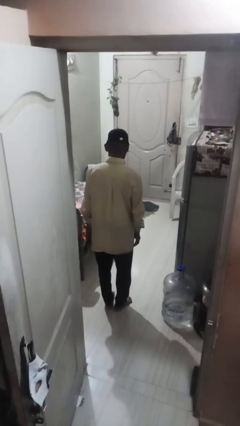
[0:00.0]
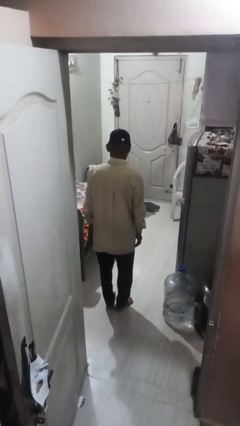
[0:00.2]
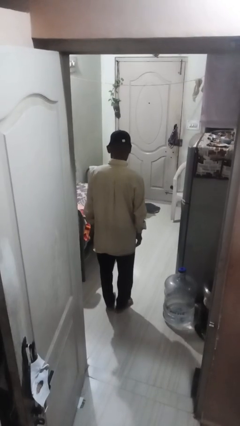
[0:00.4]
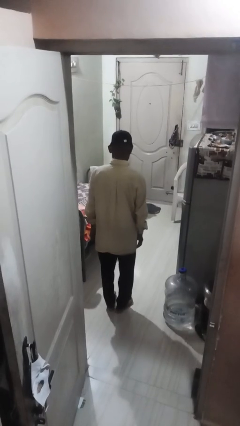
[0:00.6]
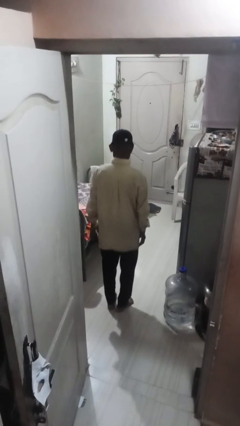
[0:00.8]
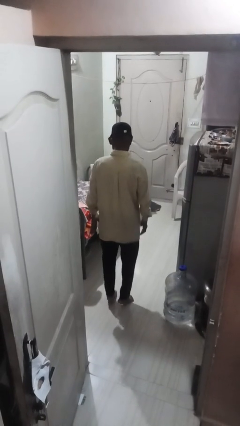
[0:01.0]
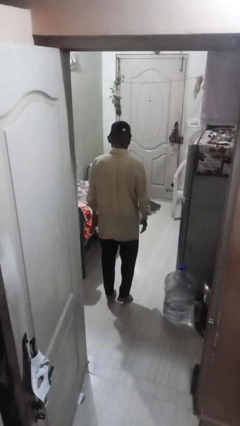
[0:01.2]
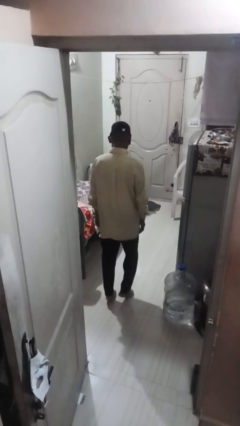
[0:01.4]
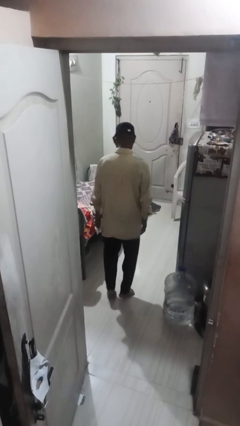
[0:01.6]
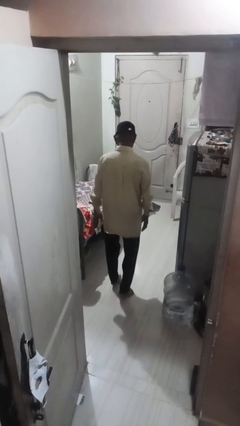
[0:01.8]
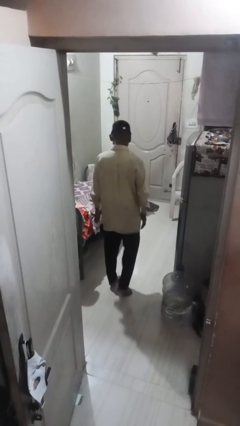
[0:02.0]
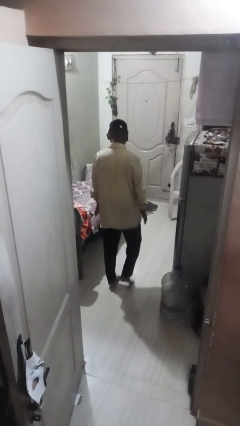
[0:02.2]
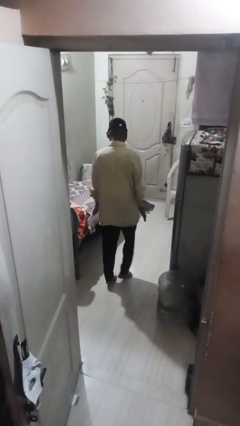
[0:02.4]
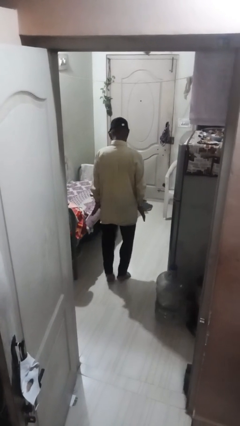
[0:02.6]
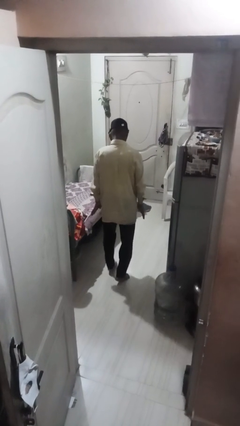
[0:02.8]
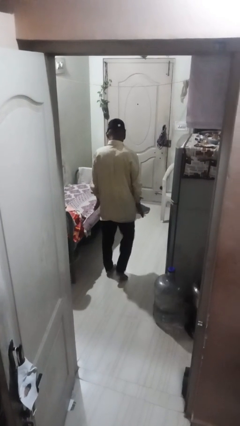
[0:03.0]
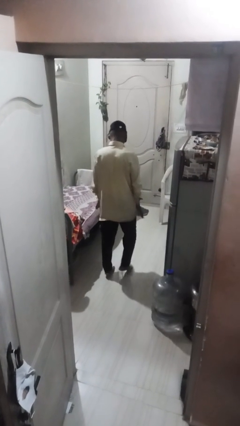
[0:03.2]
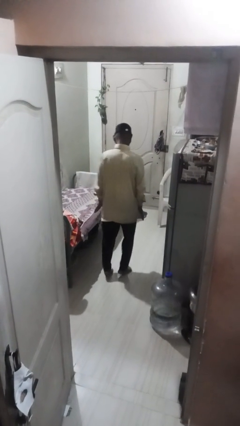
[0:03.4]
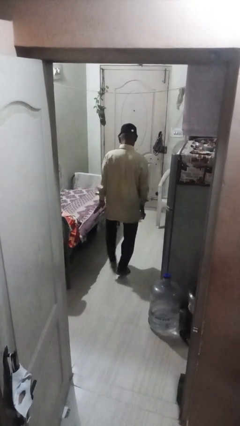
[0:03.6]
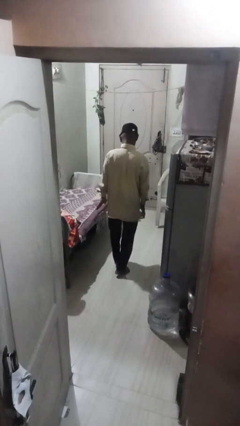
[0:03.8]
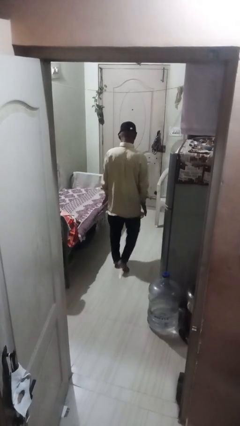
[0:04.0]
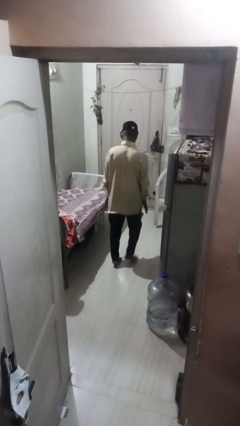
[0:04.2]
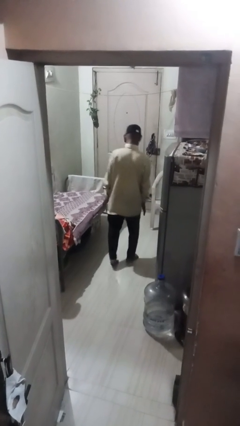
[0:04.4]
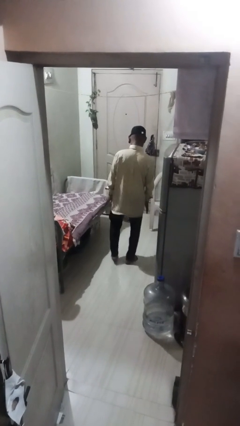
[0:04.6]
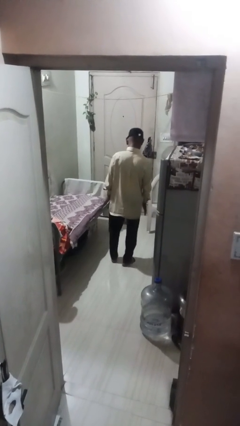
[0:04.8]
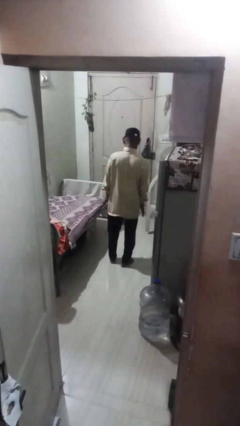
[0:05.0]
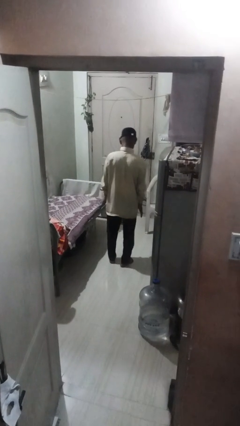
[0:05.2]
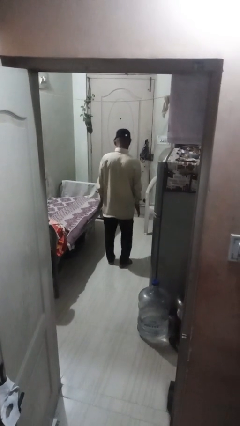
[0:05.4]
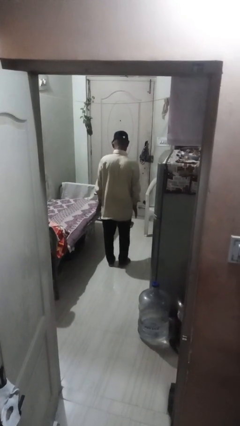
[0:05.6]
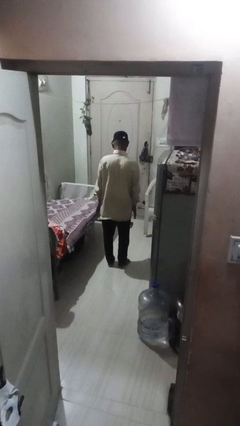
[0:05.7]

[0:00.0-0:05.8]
person walks tiptoe

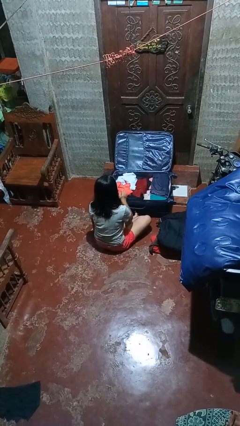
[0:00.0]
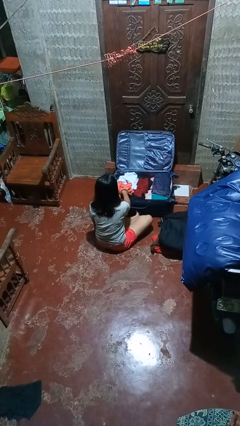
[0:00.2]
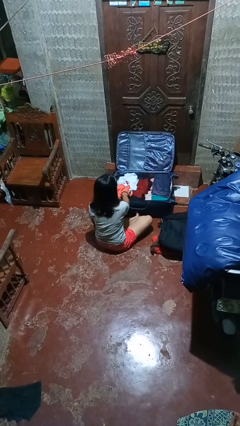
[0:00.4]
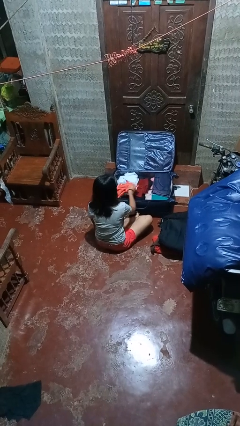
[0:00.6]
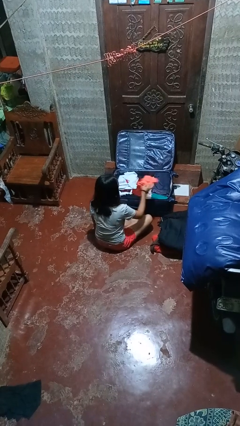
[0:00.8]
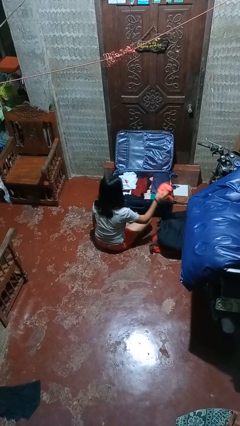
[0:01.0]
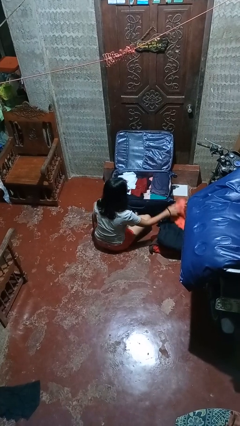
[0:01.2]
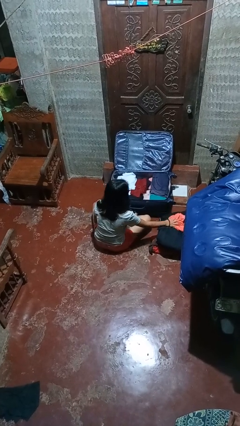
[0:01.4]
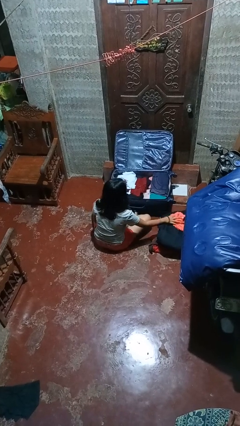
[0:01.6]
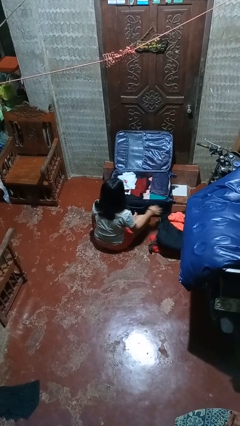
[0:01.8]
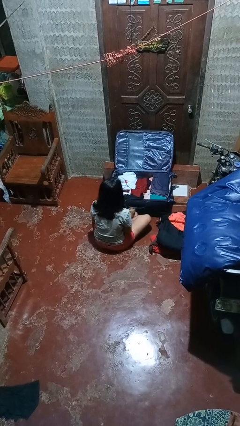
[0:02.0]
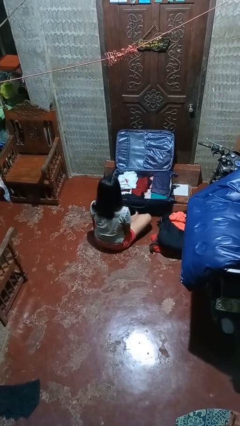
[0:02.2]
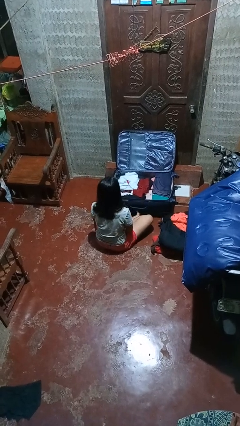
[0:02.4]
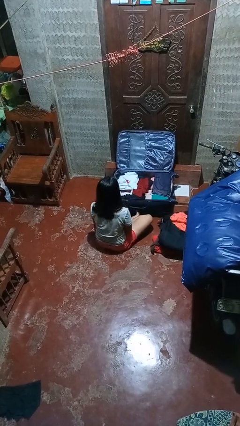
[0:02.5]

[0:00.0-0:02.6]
person unloads clothes from suitcase

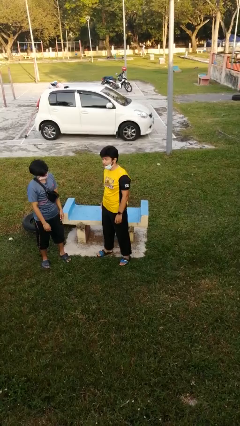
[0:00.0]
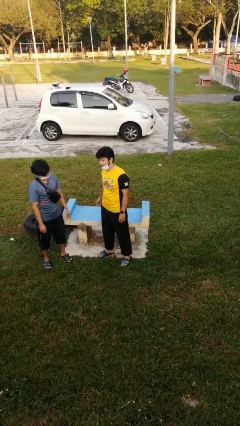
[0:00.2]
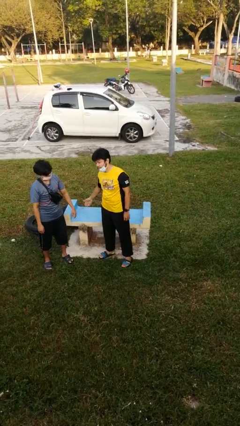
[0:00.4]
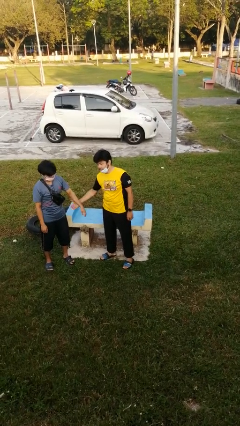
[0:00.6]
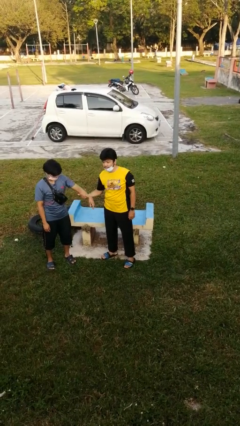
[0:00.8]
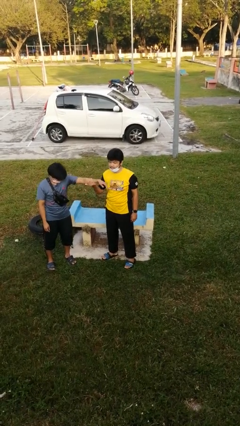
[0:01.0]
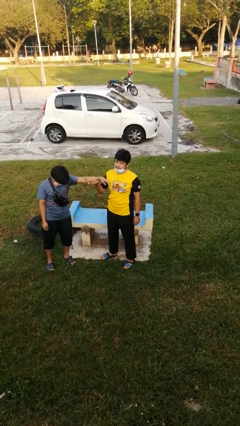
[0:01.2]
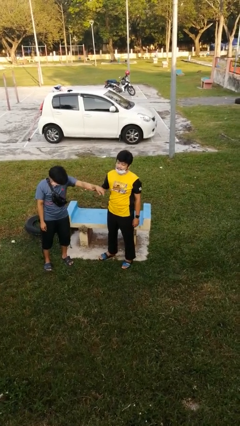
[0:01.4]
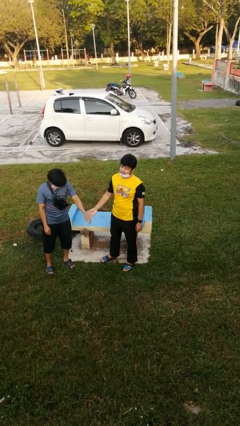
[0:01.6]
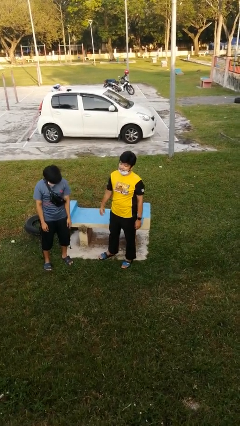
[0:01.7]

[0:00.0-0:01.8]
person grabs person by forearm

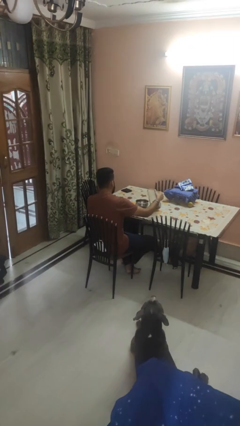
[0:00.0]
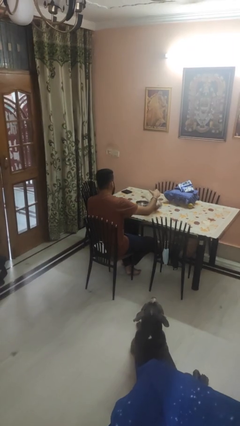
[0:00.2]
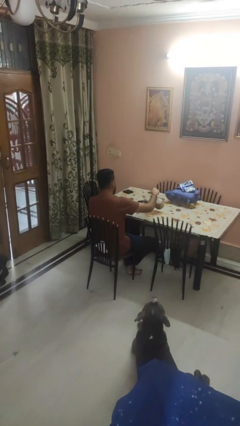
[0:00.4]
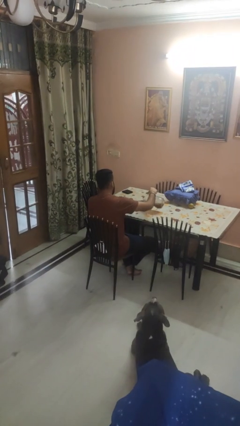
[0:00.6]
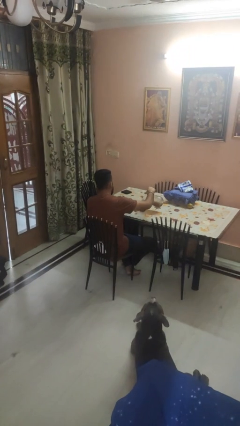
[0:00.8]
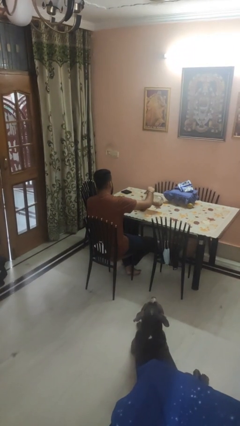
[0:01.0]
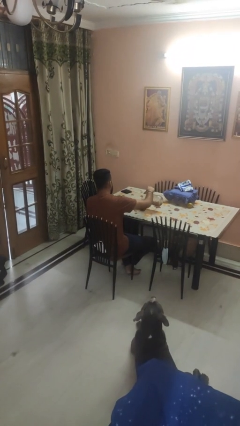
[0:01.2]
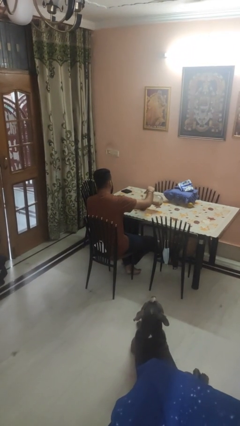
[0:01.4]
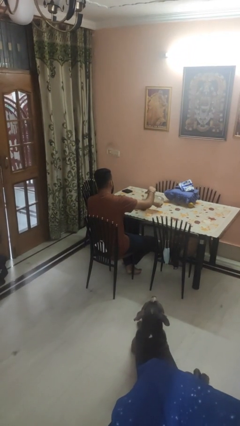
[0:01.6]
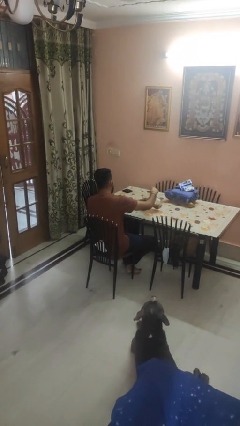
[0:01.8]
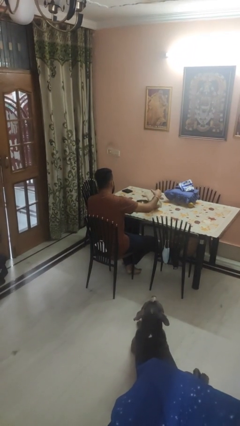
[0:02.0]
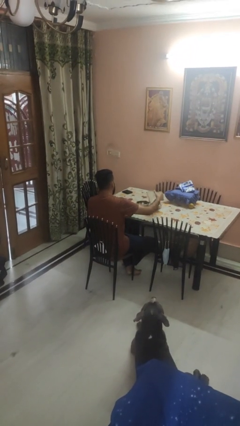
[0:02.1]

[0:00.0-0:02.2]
person pours into bowl

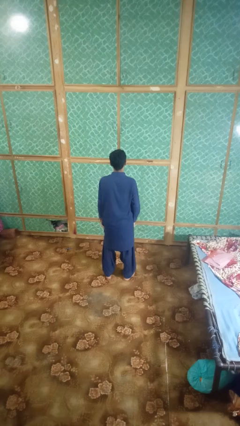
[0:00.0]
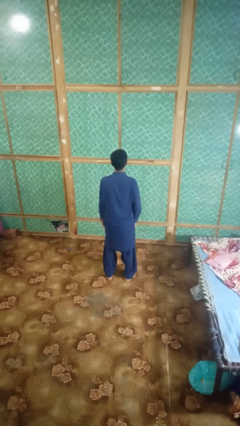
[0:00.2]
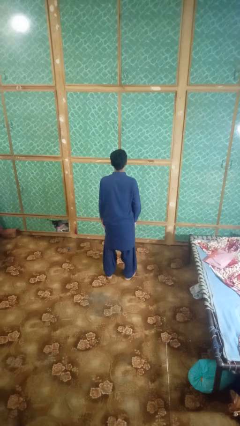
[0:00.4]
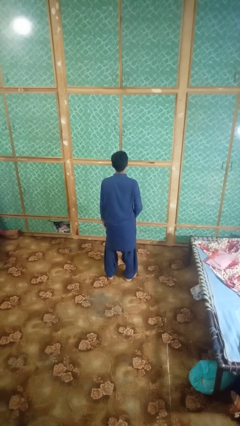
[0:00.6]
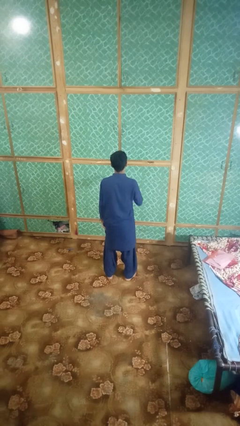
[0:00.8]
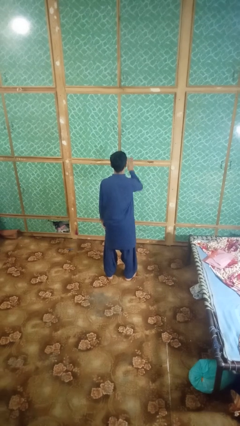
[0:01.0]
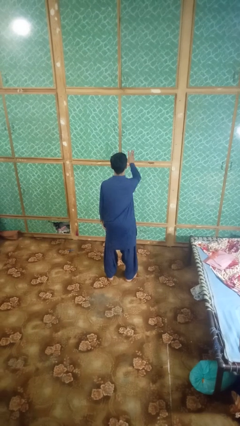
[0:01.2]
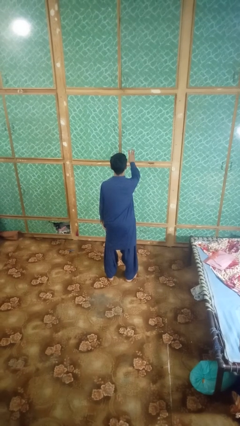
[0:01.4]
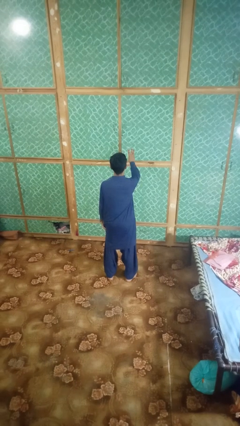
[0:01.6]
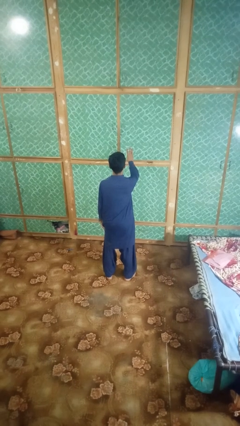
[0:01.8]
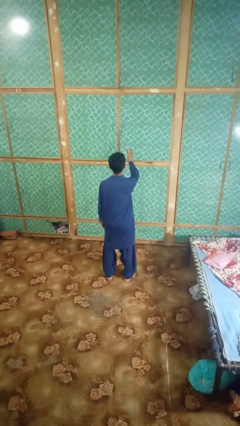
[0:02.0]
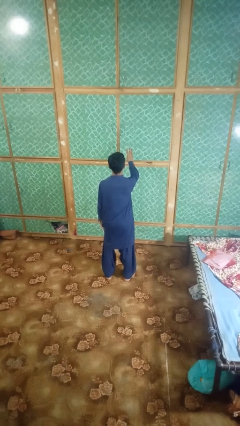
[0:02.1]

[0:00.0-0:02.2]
person gestures number three

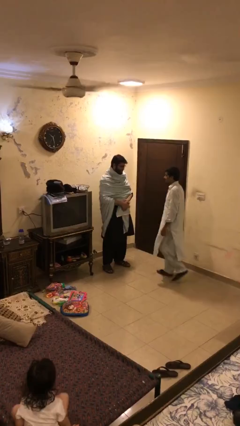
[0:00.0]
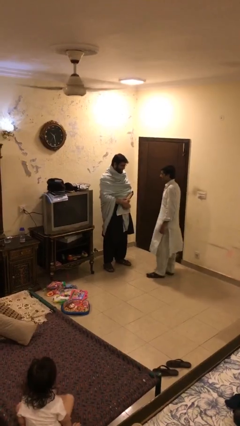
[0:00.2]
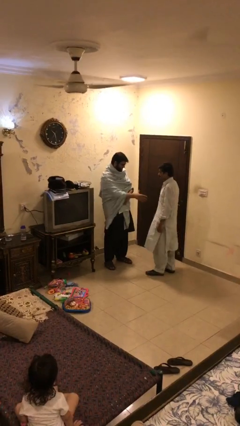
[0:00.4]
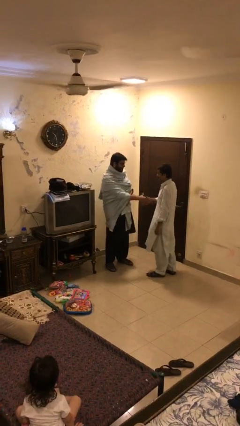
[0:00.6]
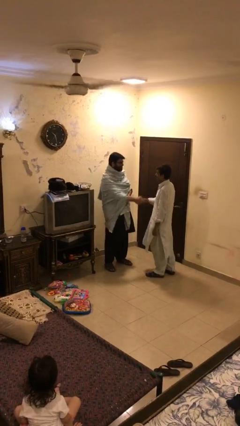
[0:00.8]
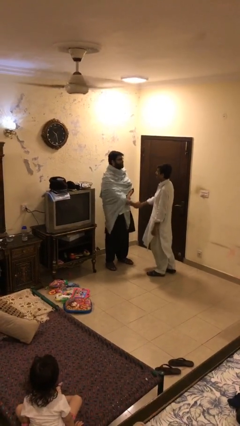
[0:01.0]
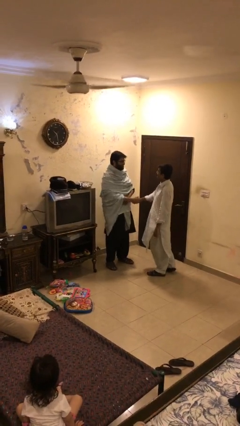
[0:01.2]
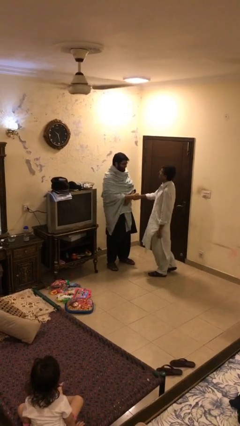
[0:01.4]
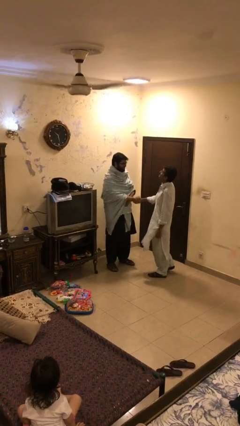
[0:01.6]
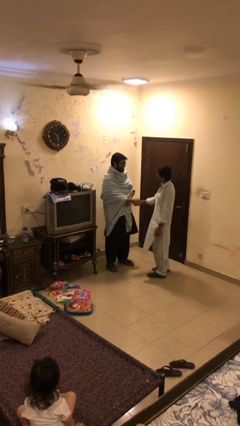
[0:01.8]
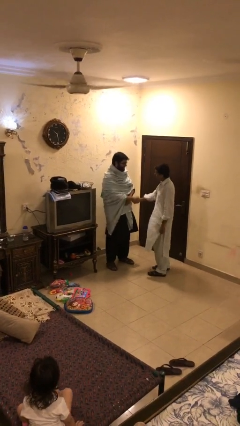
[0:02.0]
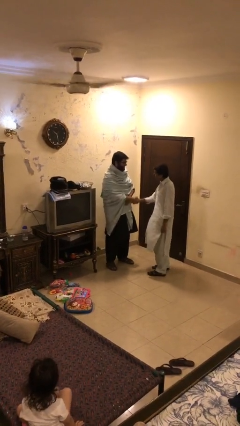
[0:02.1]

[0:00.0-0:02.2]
person shakes hand

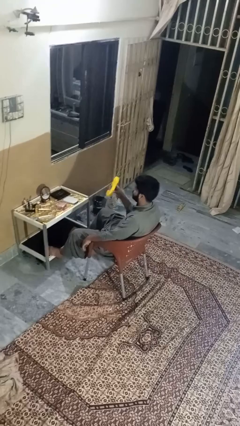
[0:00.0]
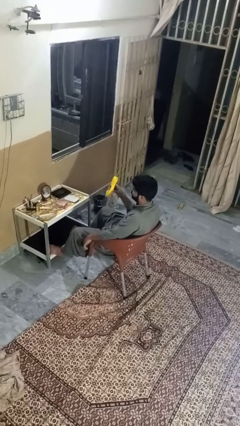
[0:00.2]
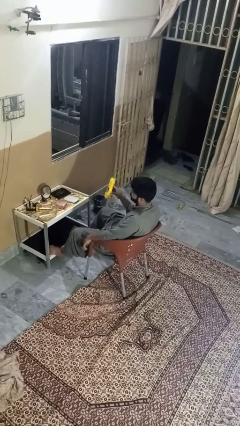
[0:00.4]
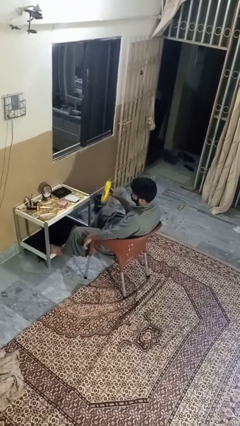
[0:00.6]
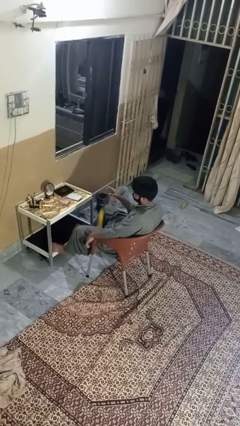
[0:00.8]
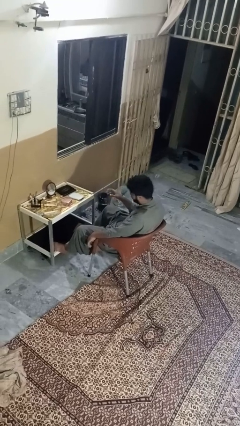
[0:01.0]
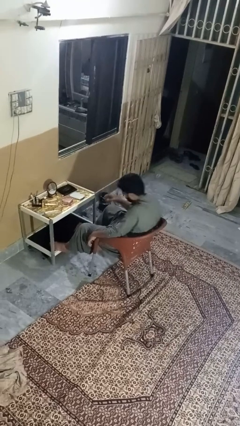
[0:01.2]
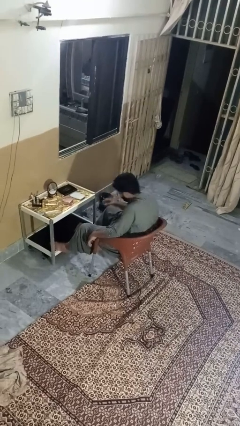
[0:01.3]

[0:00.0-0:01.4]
person throws object to ground
